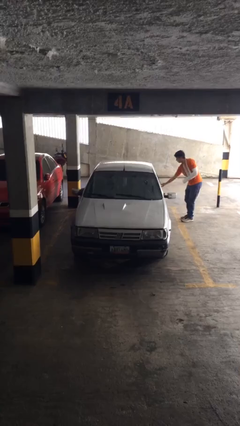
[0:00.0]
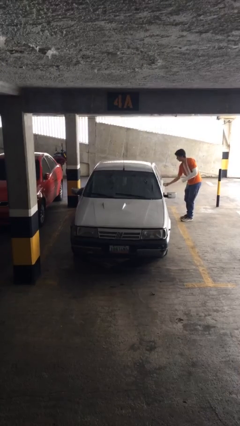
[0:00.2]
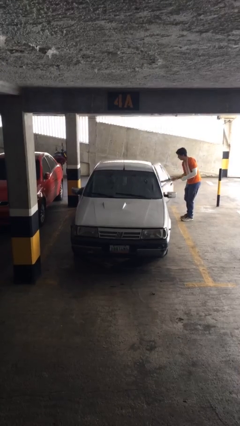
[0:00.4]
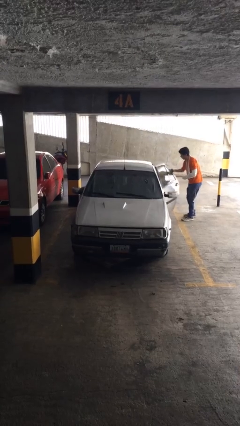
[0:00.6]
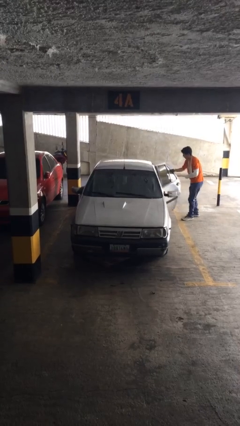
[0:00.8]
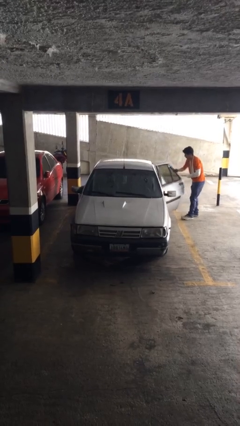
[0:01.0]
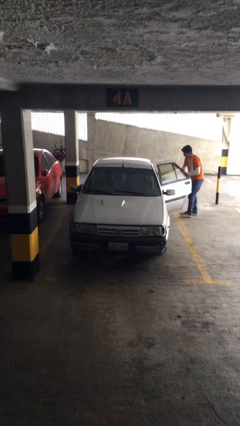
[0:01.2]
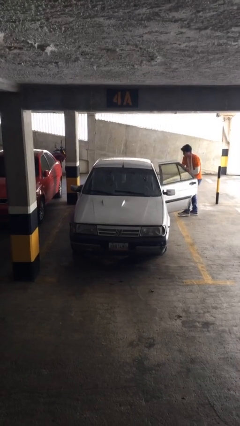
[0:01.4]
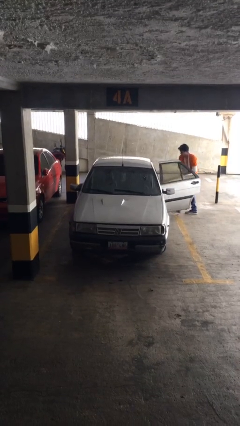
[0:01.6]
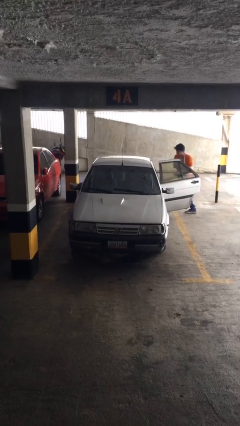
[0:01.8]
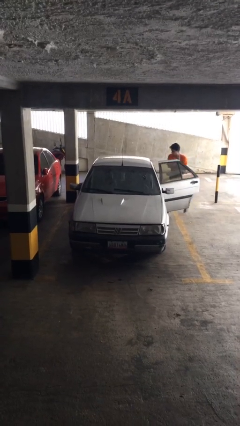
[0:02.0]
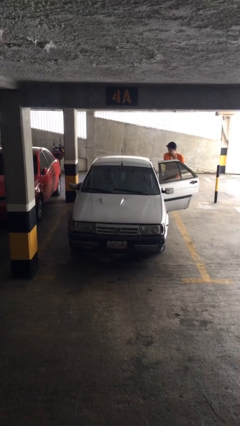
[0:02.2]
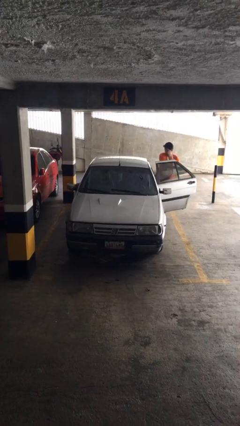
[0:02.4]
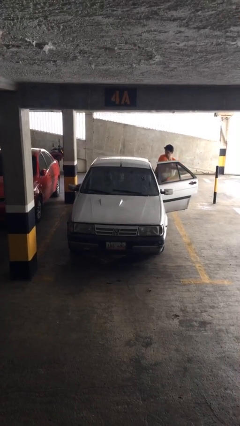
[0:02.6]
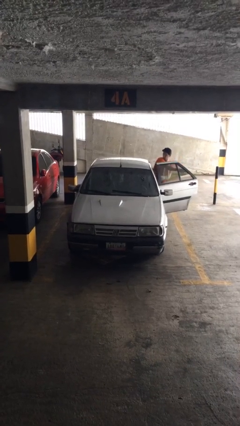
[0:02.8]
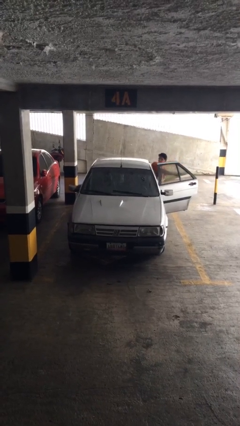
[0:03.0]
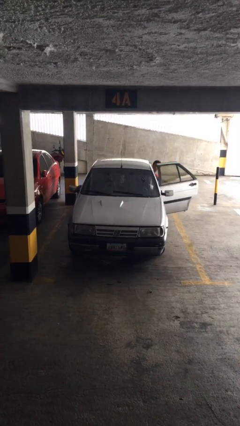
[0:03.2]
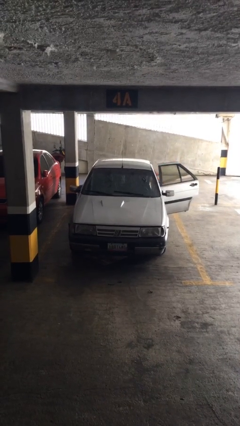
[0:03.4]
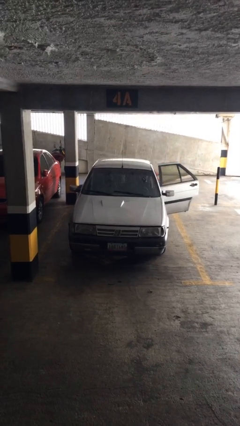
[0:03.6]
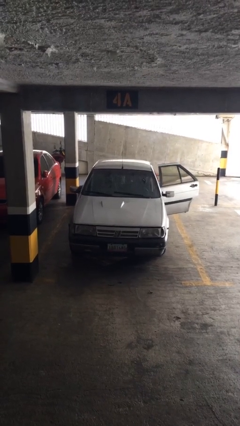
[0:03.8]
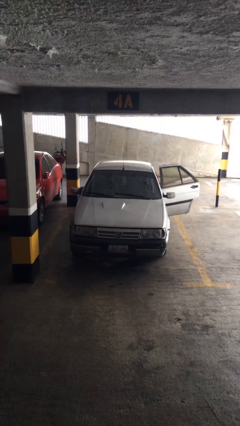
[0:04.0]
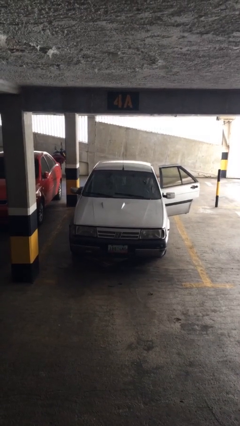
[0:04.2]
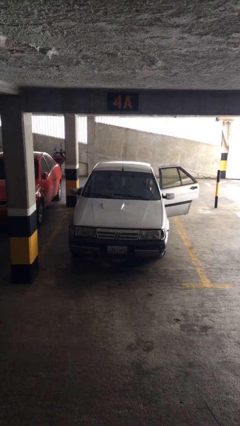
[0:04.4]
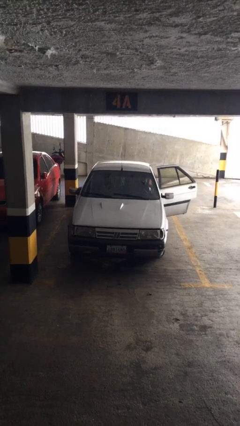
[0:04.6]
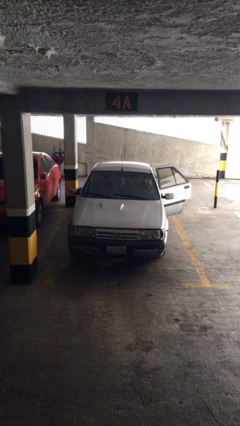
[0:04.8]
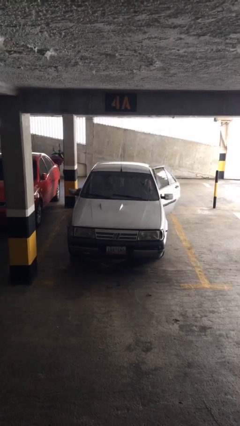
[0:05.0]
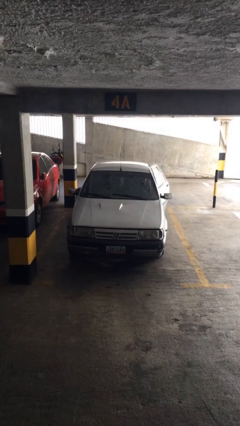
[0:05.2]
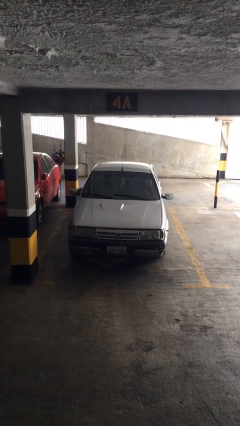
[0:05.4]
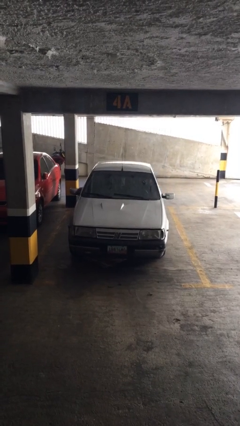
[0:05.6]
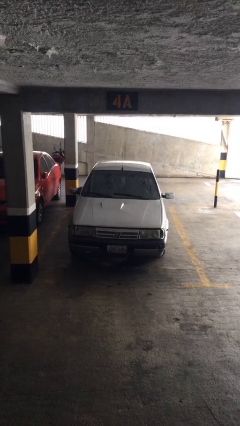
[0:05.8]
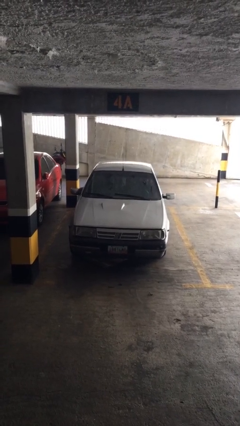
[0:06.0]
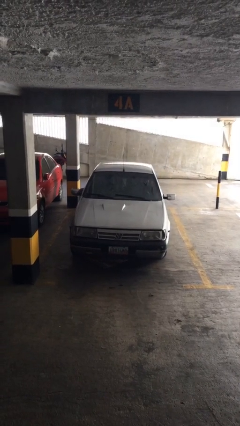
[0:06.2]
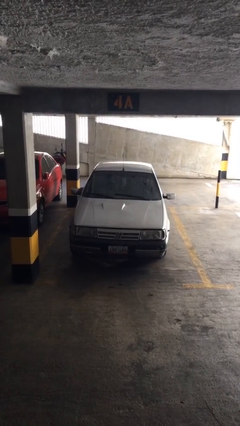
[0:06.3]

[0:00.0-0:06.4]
car picks up person

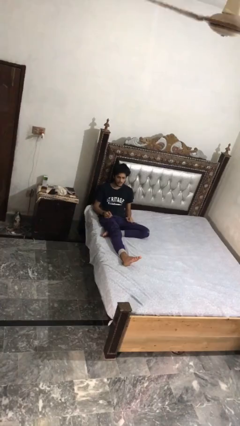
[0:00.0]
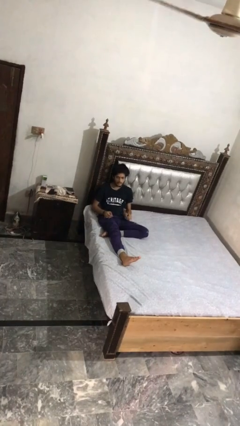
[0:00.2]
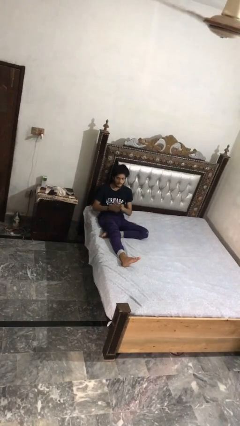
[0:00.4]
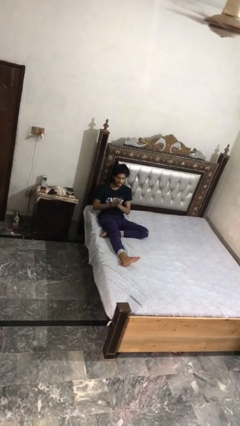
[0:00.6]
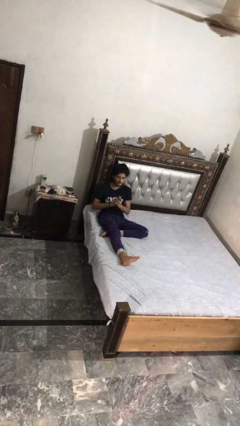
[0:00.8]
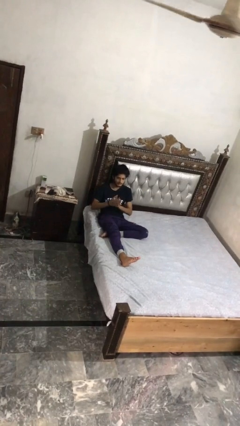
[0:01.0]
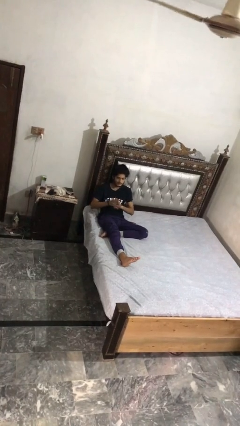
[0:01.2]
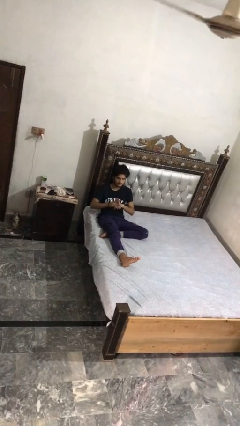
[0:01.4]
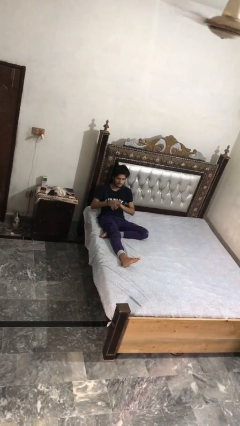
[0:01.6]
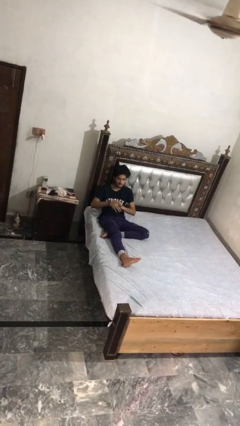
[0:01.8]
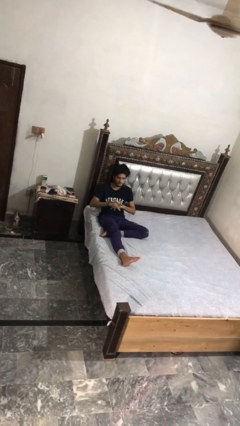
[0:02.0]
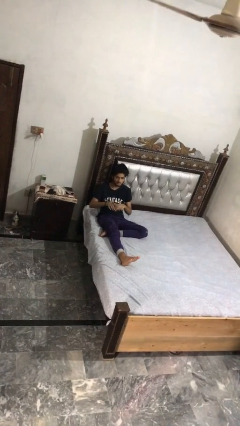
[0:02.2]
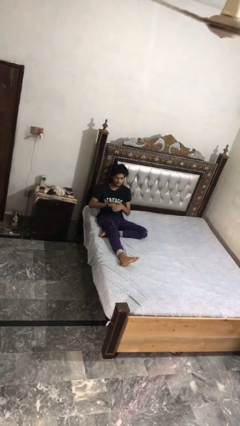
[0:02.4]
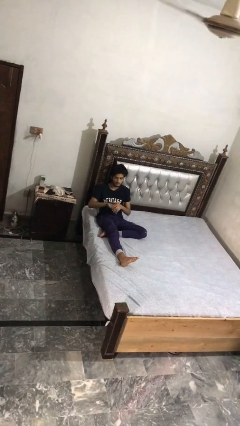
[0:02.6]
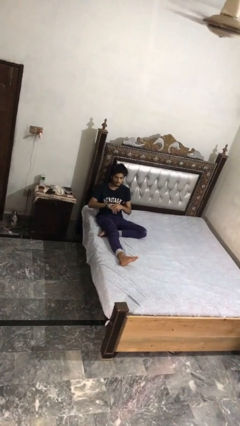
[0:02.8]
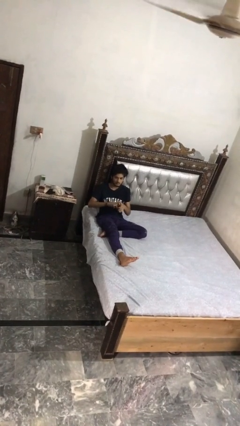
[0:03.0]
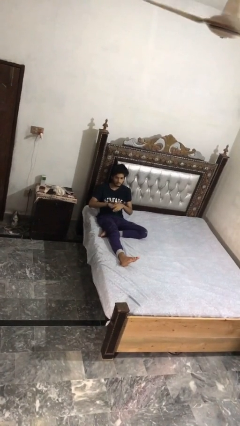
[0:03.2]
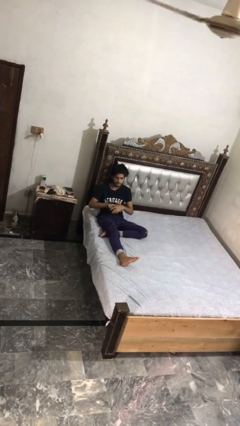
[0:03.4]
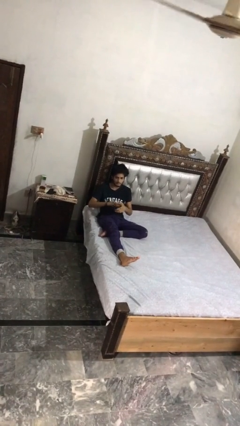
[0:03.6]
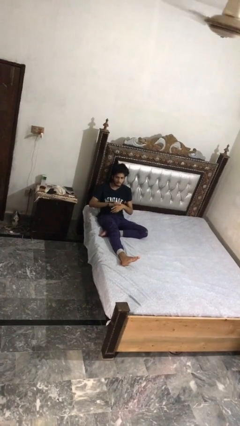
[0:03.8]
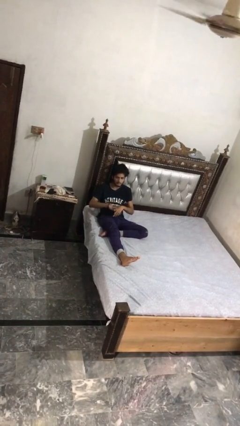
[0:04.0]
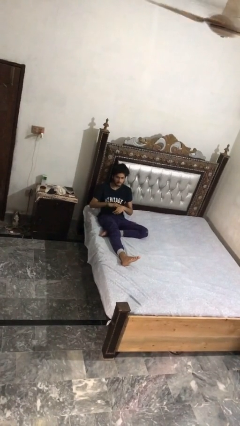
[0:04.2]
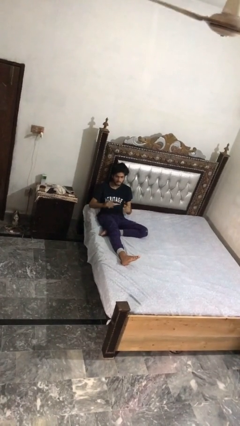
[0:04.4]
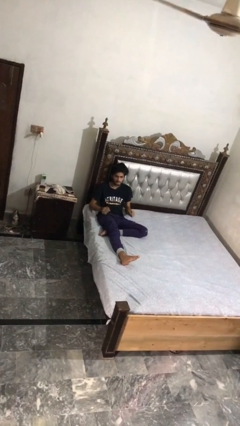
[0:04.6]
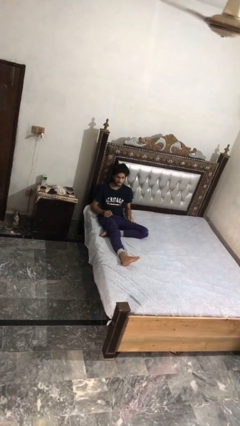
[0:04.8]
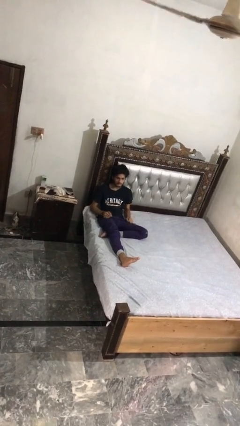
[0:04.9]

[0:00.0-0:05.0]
person cracks knuckles

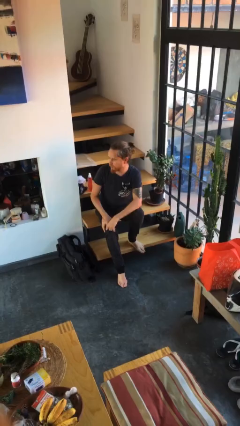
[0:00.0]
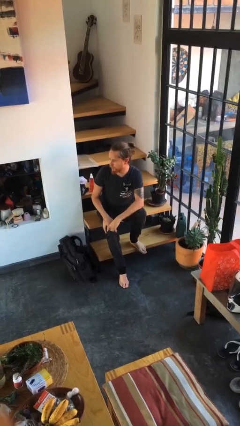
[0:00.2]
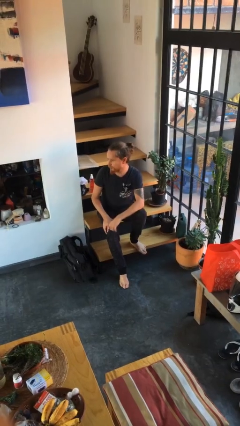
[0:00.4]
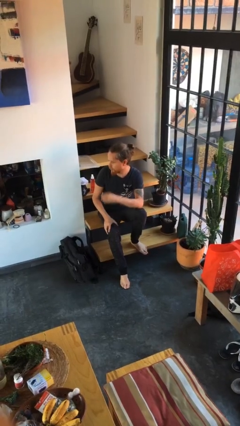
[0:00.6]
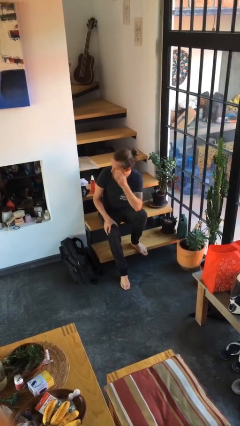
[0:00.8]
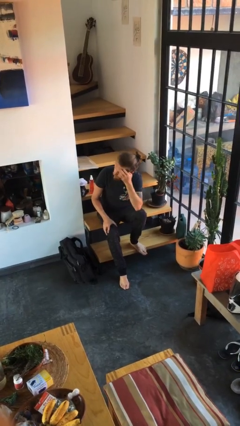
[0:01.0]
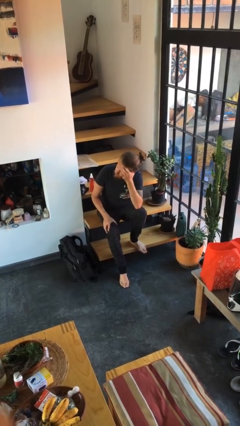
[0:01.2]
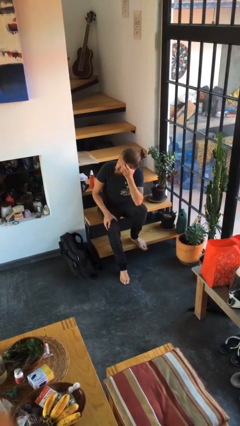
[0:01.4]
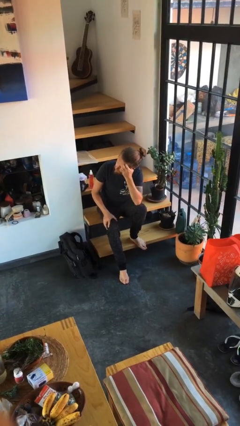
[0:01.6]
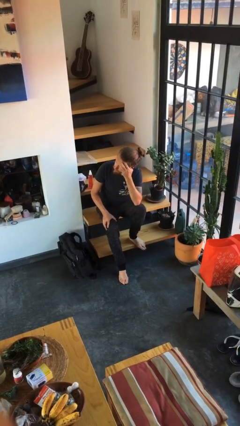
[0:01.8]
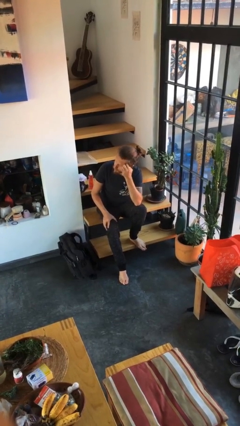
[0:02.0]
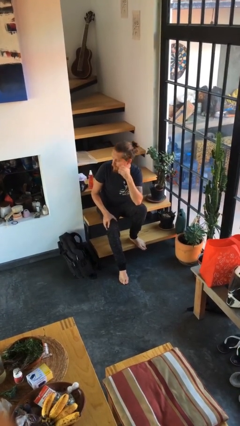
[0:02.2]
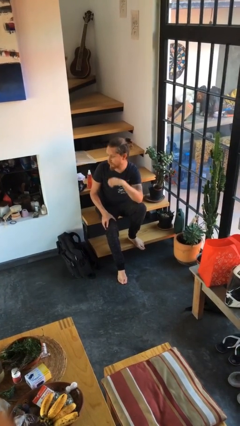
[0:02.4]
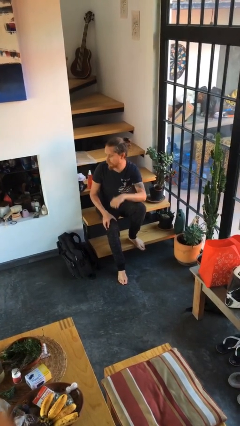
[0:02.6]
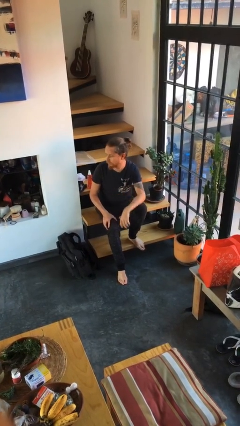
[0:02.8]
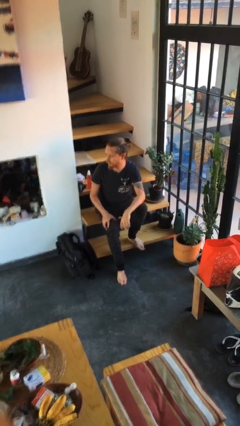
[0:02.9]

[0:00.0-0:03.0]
person scratches face

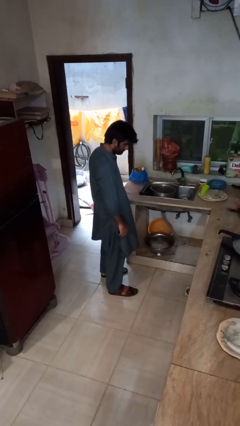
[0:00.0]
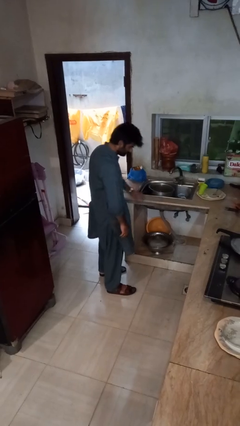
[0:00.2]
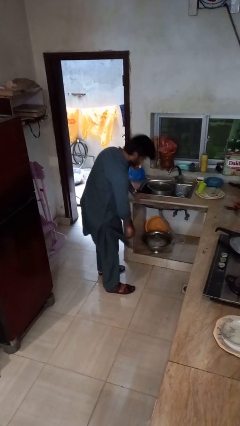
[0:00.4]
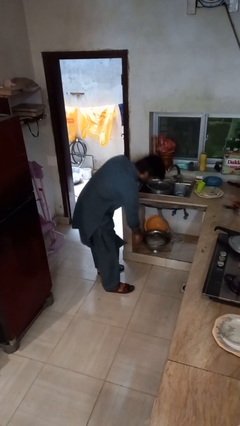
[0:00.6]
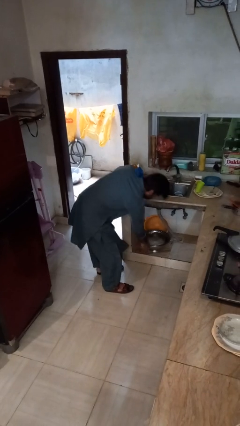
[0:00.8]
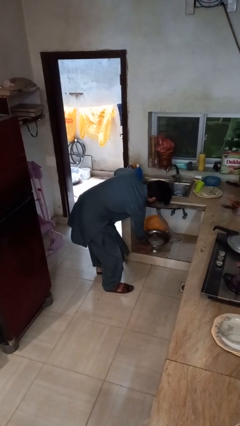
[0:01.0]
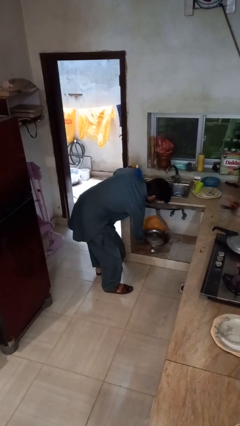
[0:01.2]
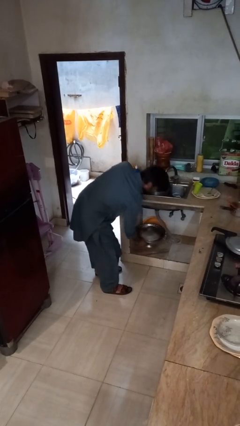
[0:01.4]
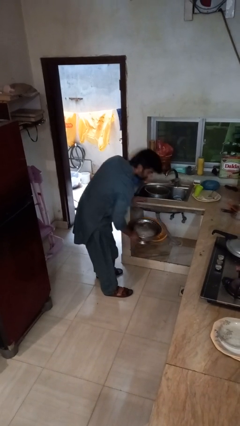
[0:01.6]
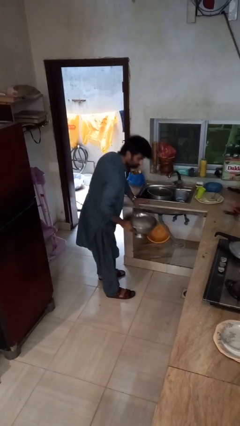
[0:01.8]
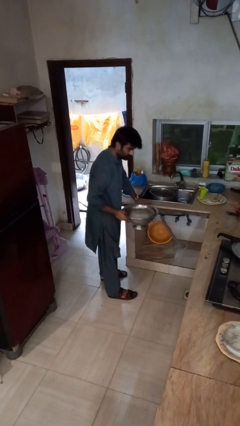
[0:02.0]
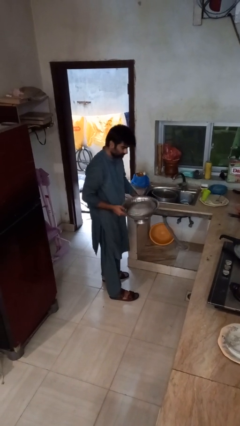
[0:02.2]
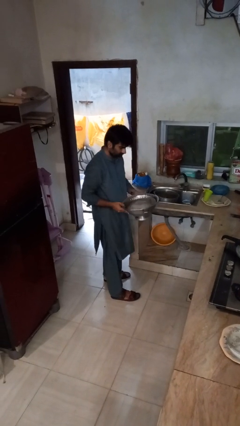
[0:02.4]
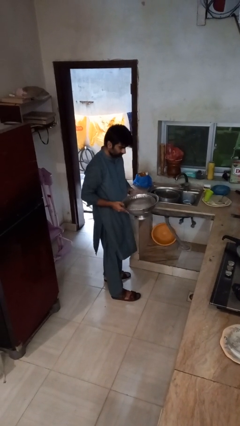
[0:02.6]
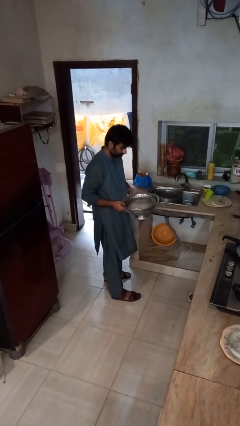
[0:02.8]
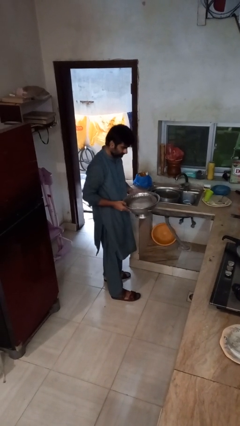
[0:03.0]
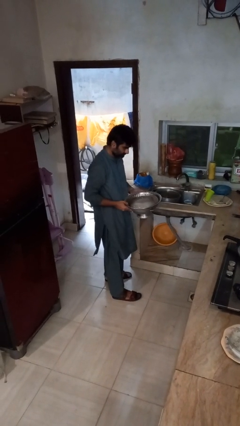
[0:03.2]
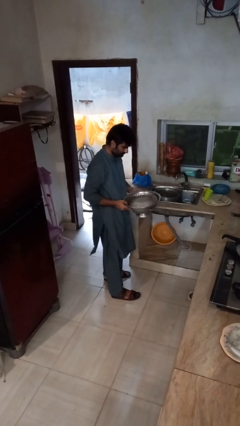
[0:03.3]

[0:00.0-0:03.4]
person picks up object from cabinet

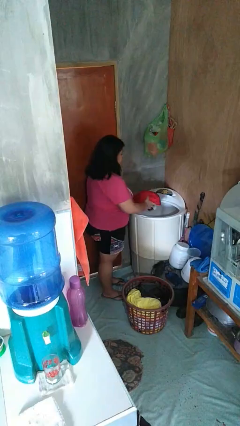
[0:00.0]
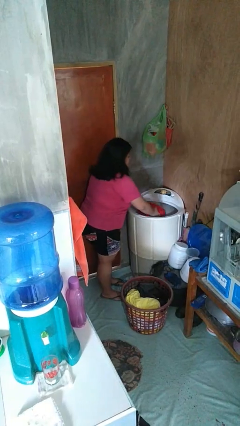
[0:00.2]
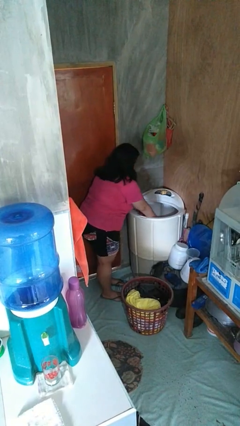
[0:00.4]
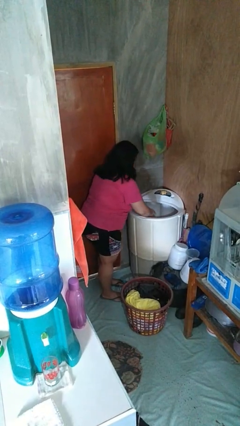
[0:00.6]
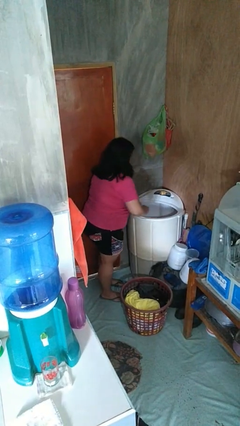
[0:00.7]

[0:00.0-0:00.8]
person loads dryer
